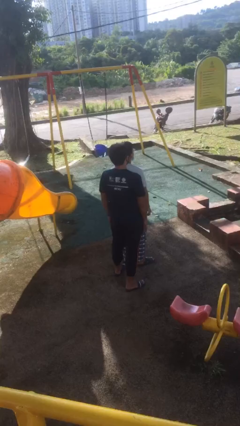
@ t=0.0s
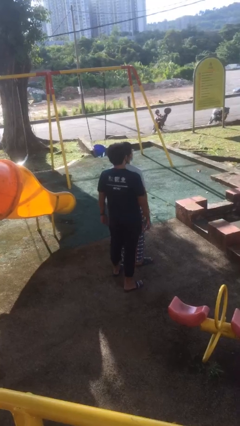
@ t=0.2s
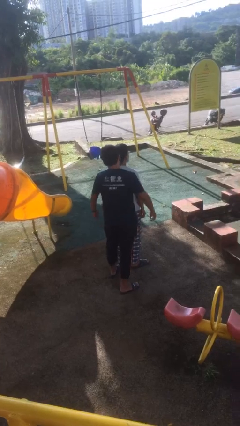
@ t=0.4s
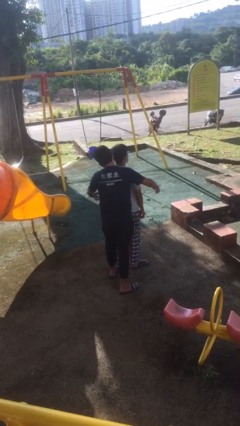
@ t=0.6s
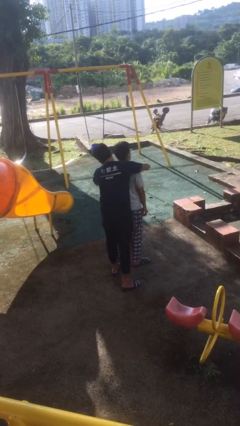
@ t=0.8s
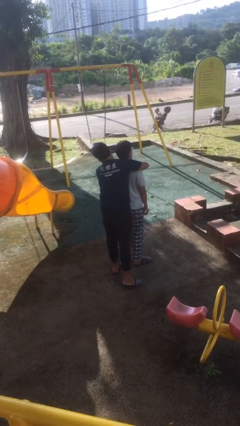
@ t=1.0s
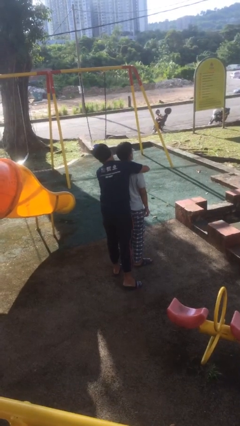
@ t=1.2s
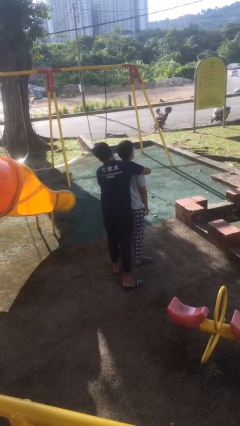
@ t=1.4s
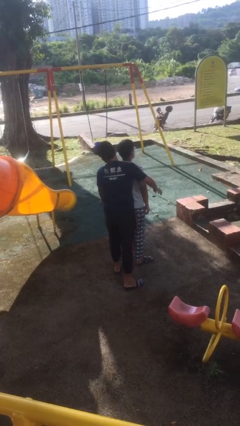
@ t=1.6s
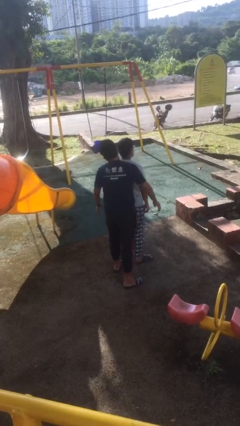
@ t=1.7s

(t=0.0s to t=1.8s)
person hugs person from behind

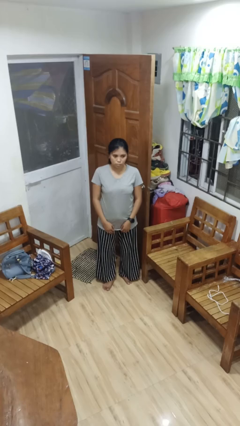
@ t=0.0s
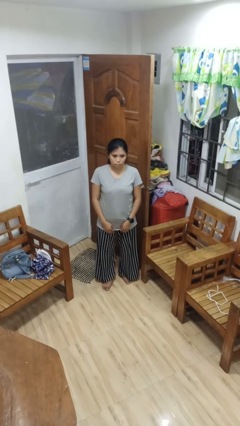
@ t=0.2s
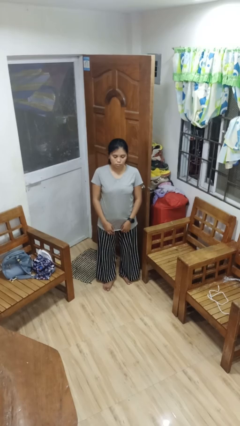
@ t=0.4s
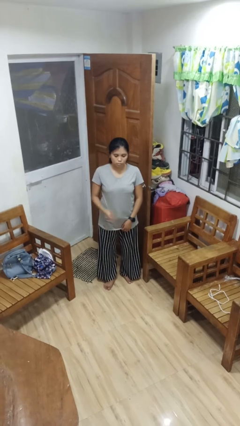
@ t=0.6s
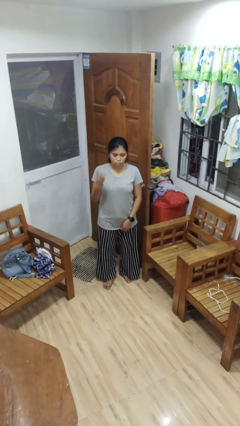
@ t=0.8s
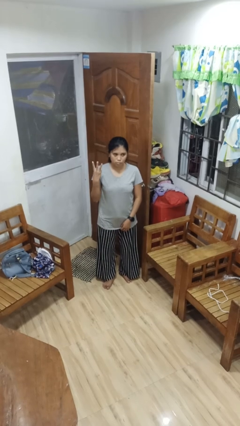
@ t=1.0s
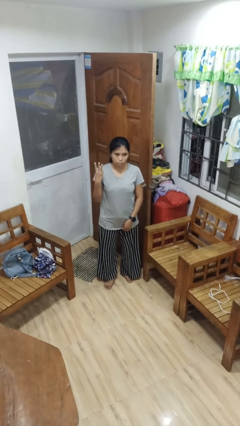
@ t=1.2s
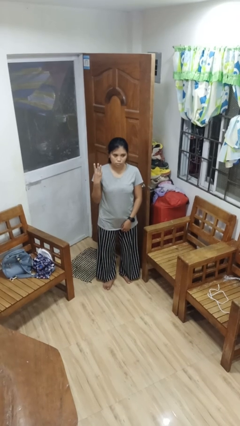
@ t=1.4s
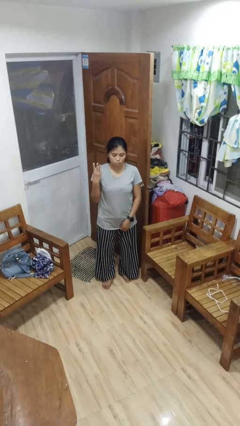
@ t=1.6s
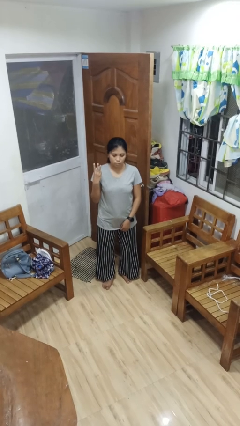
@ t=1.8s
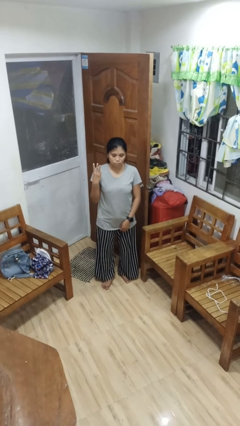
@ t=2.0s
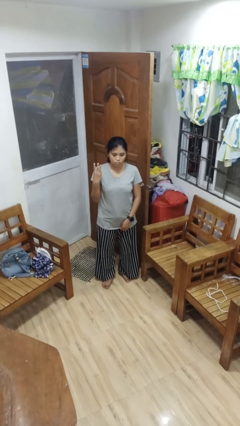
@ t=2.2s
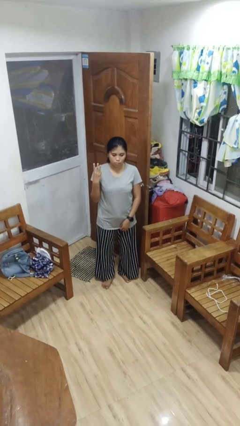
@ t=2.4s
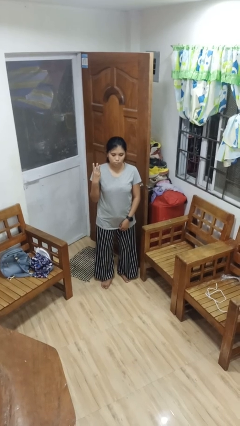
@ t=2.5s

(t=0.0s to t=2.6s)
person gestures number three

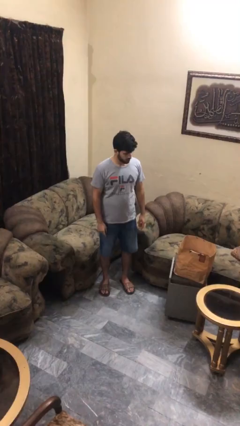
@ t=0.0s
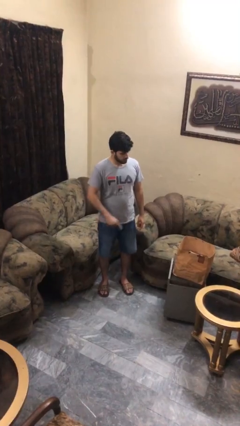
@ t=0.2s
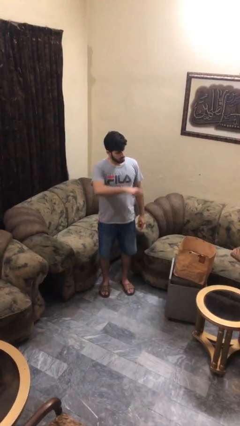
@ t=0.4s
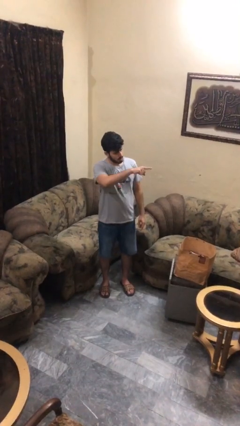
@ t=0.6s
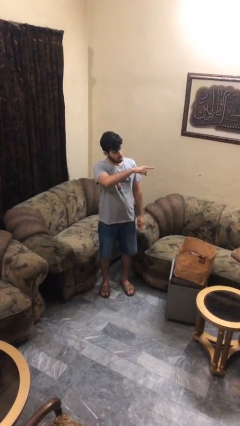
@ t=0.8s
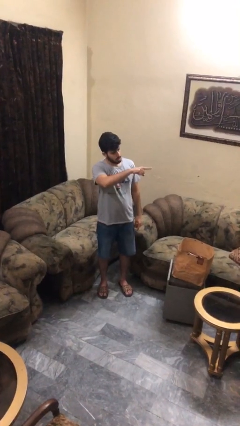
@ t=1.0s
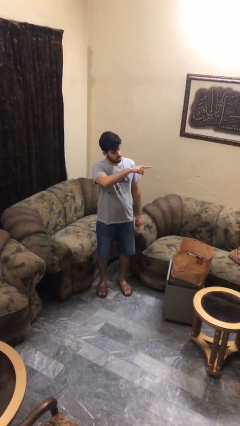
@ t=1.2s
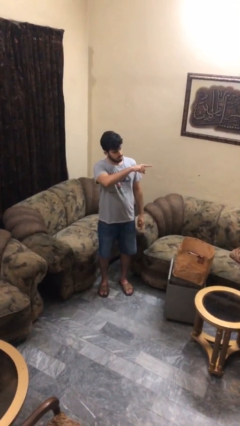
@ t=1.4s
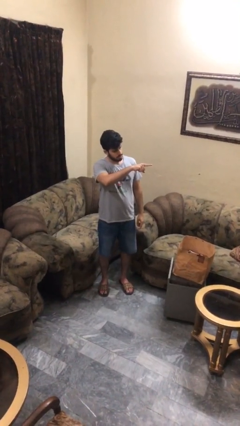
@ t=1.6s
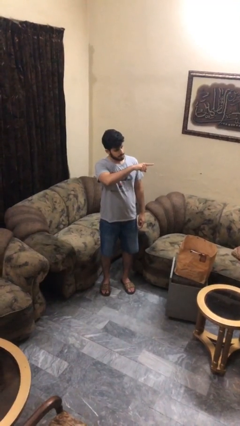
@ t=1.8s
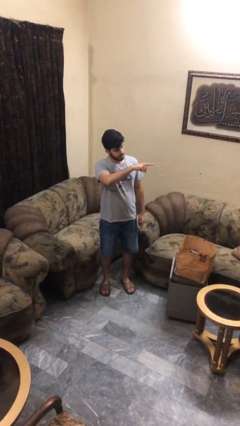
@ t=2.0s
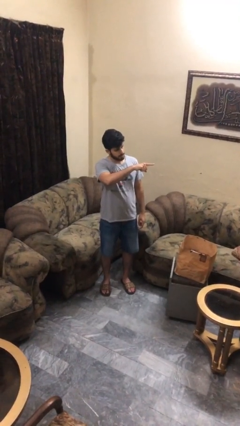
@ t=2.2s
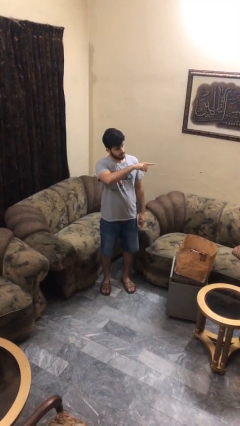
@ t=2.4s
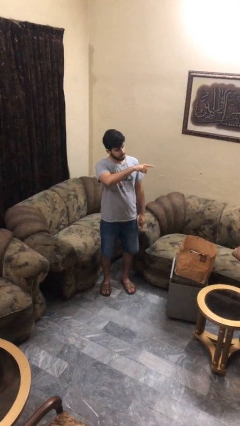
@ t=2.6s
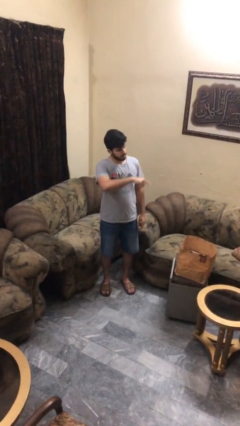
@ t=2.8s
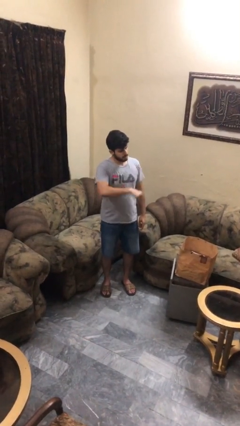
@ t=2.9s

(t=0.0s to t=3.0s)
person points at person

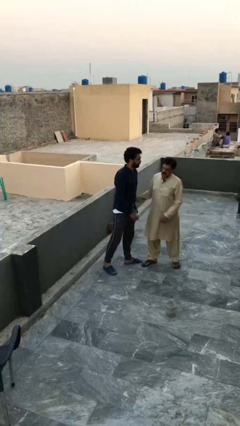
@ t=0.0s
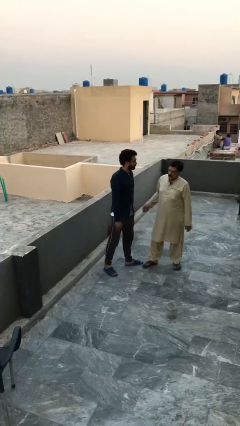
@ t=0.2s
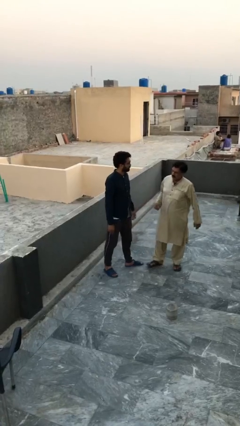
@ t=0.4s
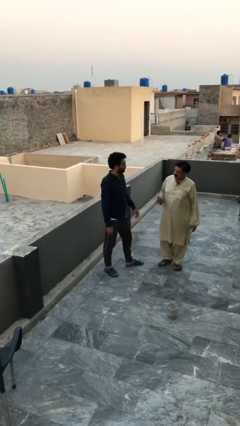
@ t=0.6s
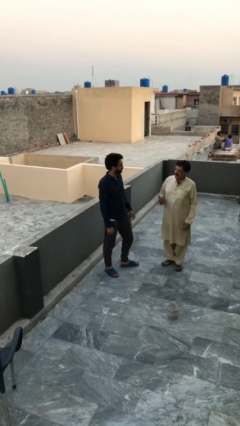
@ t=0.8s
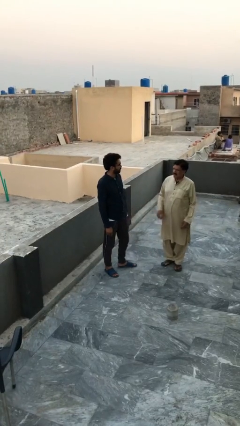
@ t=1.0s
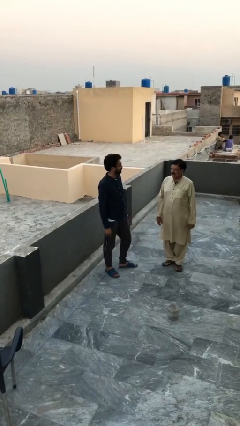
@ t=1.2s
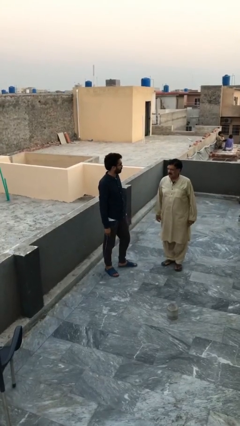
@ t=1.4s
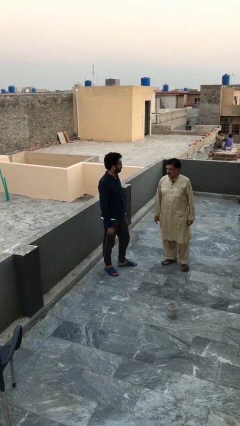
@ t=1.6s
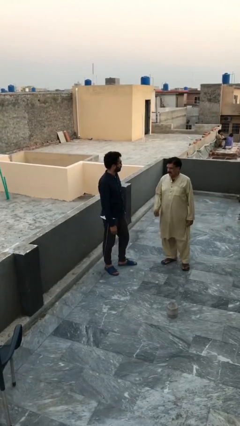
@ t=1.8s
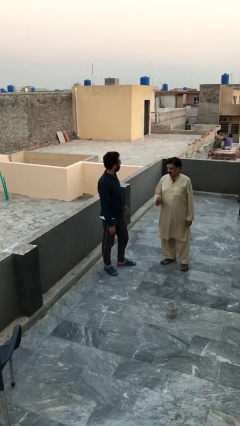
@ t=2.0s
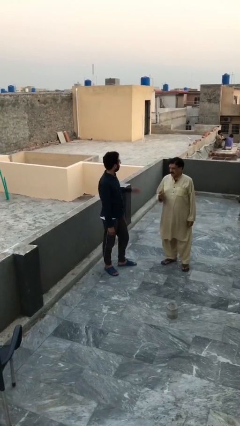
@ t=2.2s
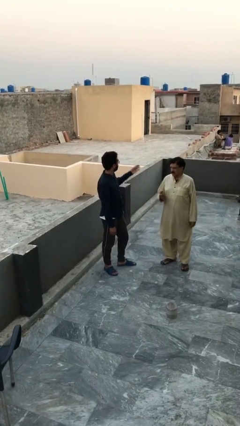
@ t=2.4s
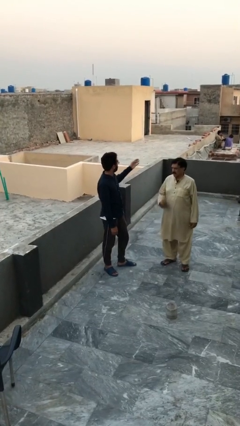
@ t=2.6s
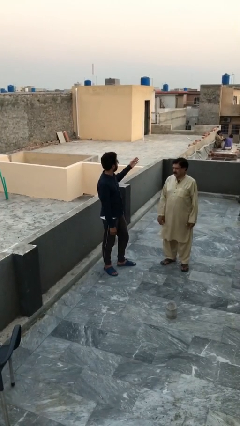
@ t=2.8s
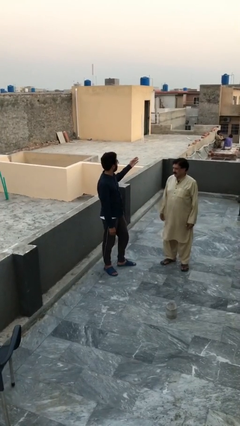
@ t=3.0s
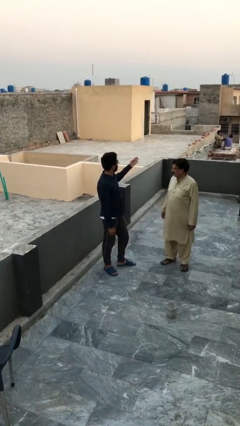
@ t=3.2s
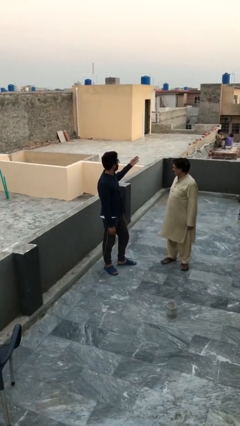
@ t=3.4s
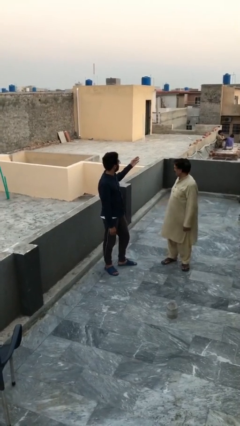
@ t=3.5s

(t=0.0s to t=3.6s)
person talks to person

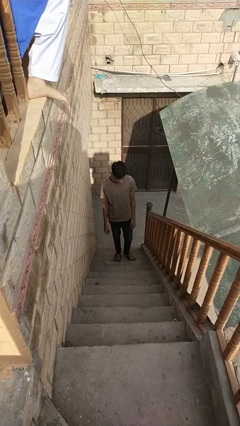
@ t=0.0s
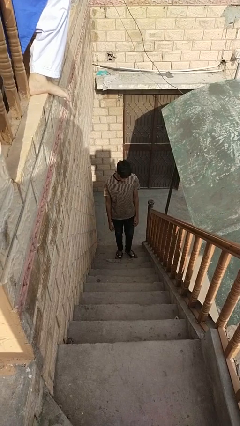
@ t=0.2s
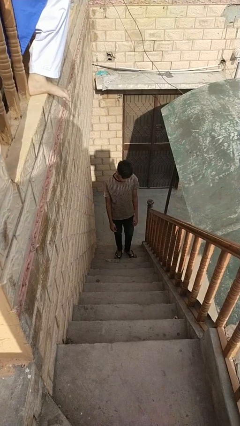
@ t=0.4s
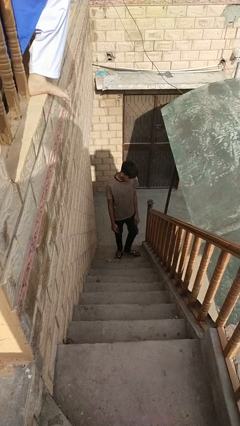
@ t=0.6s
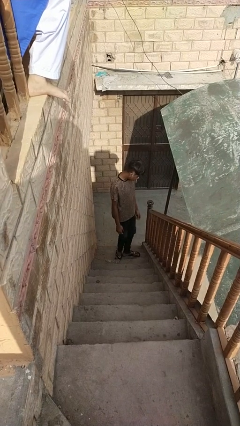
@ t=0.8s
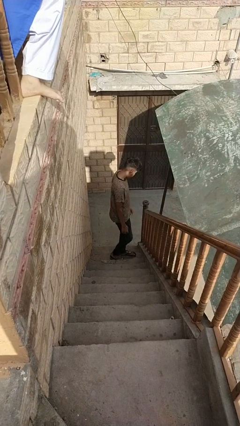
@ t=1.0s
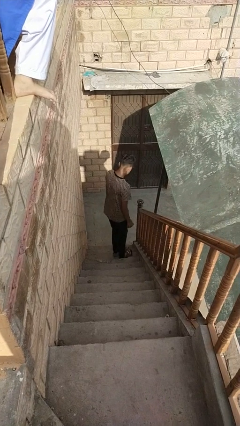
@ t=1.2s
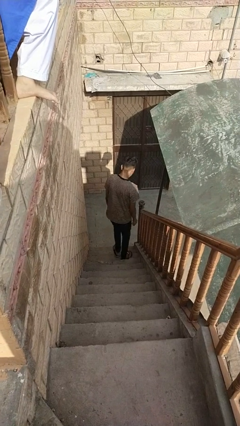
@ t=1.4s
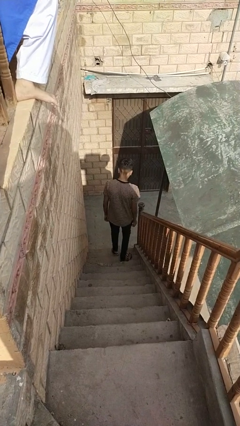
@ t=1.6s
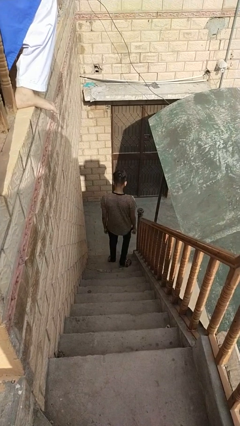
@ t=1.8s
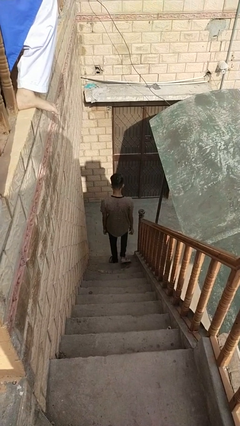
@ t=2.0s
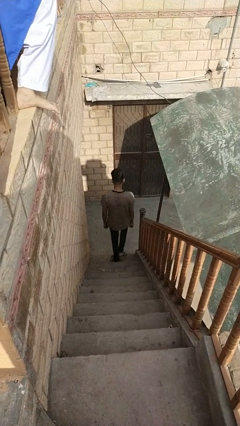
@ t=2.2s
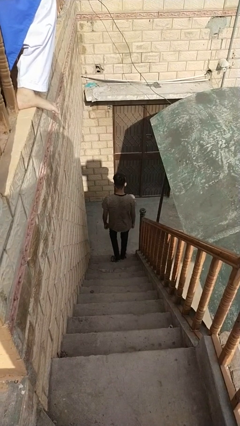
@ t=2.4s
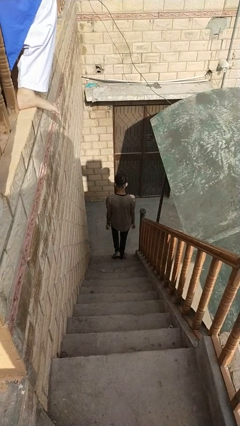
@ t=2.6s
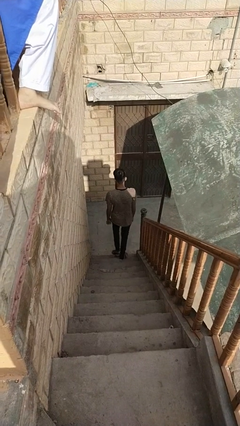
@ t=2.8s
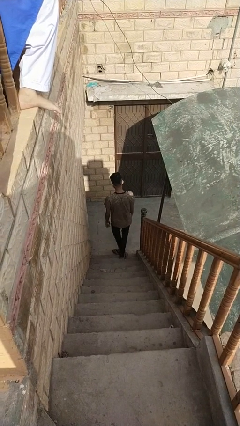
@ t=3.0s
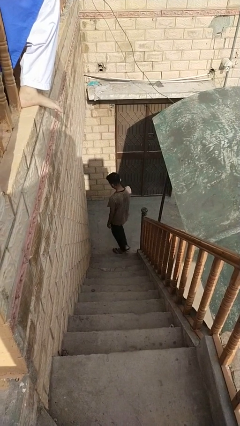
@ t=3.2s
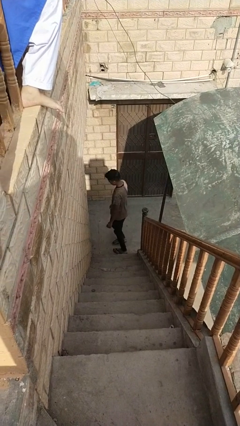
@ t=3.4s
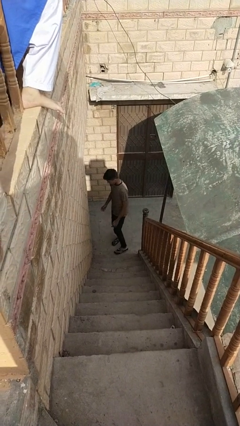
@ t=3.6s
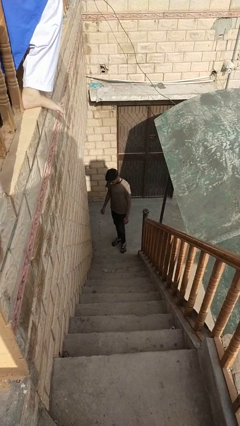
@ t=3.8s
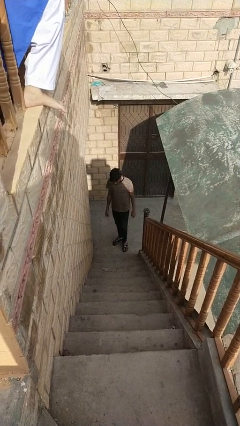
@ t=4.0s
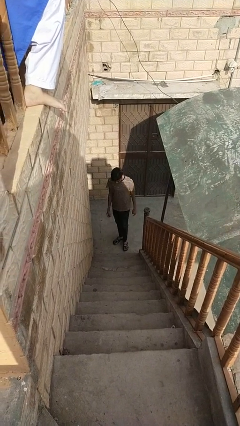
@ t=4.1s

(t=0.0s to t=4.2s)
person climbs down stairs

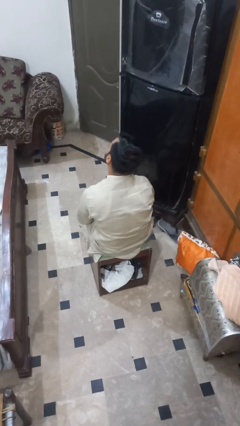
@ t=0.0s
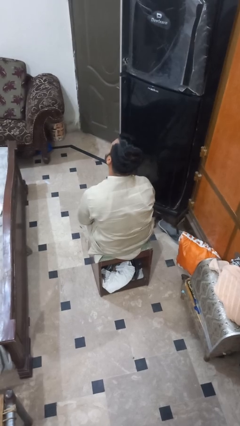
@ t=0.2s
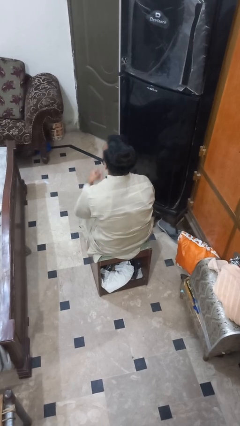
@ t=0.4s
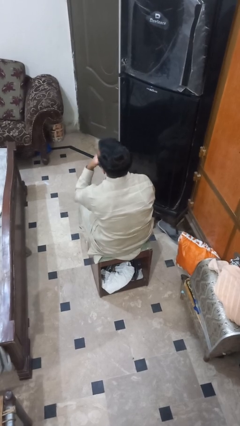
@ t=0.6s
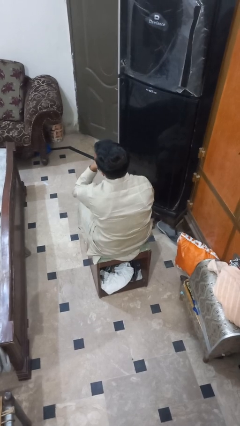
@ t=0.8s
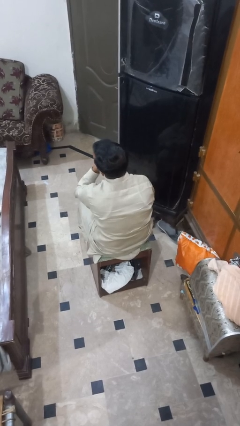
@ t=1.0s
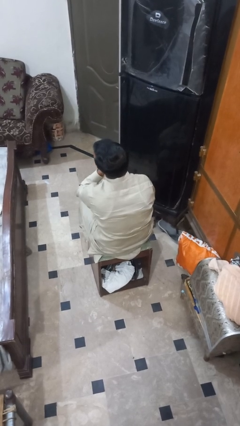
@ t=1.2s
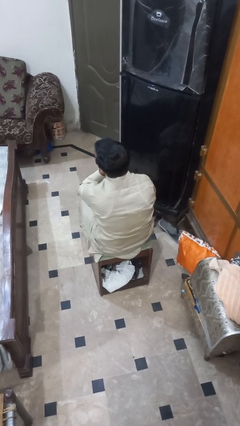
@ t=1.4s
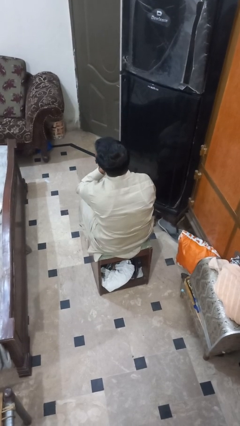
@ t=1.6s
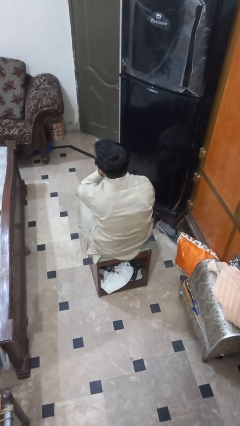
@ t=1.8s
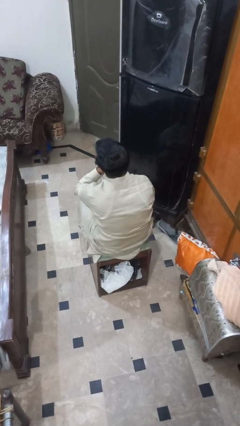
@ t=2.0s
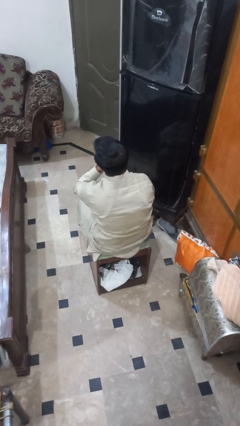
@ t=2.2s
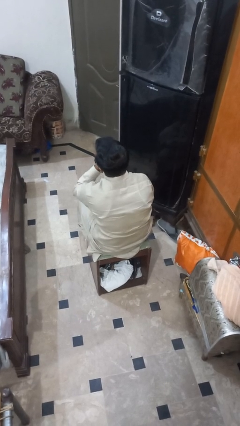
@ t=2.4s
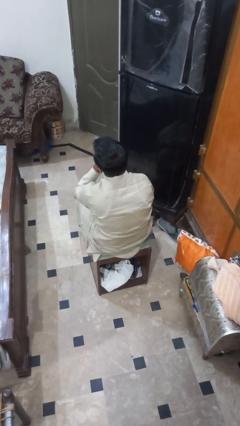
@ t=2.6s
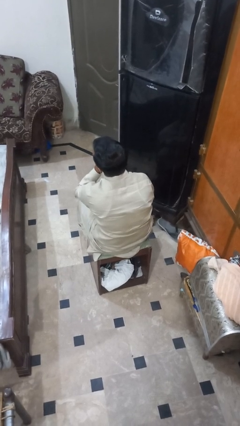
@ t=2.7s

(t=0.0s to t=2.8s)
person strokes chin
